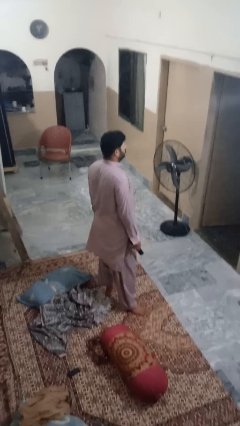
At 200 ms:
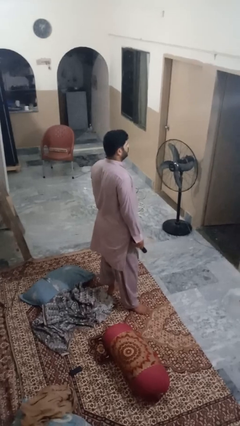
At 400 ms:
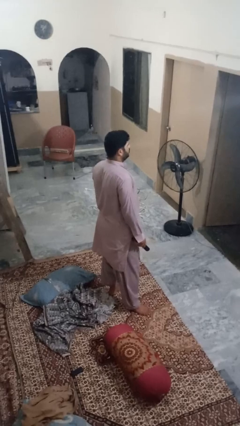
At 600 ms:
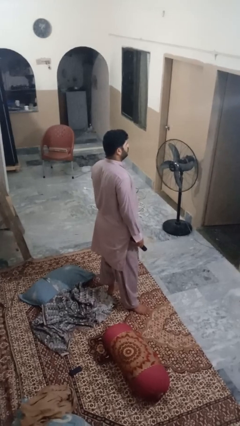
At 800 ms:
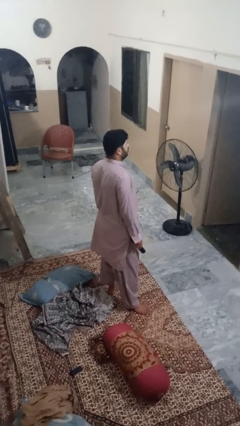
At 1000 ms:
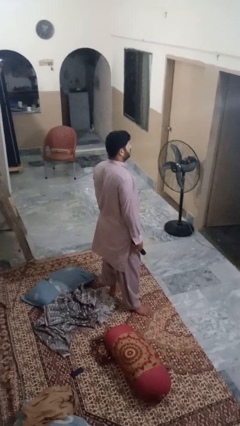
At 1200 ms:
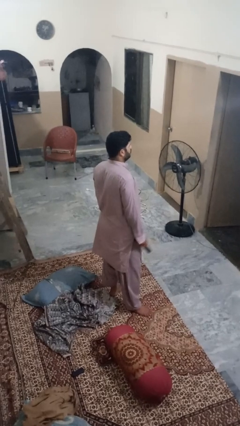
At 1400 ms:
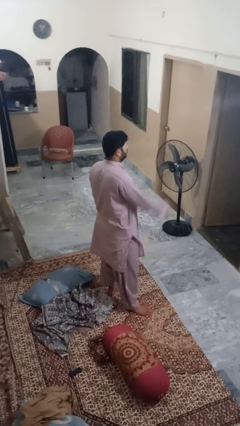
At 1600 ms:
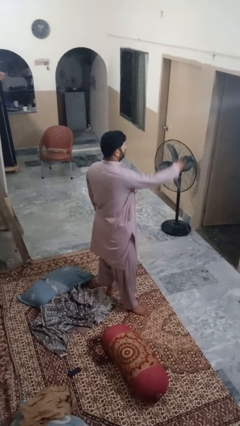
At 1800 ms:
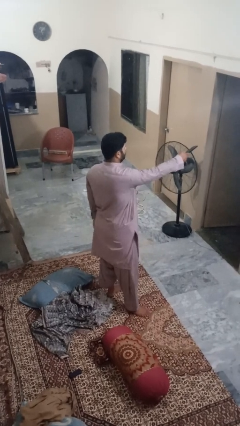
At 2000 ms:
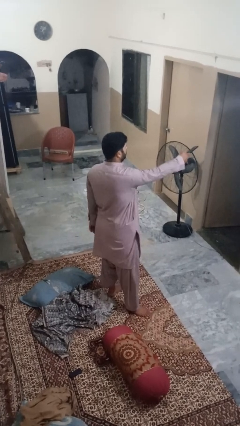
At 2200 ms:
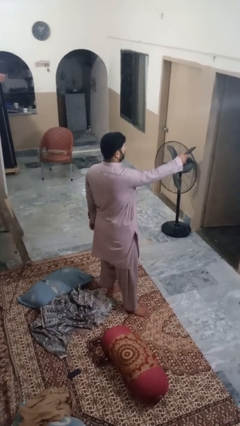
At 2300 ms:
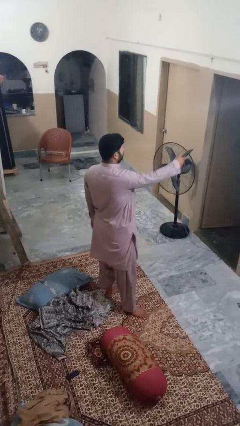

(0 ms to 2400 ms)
person uses television remote

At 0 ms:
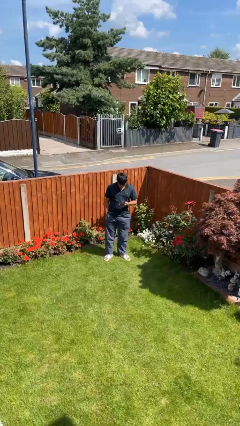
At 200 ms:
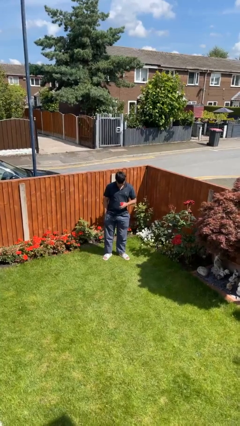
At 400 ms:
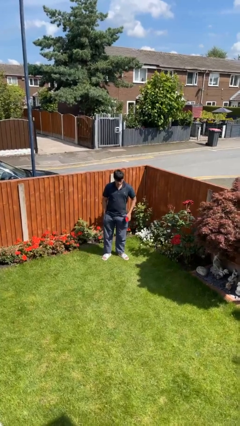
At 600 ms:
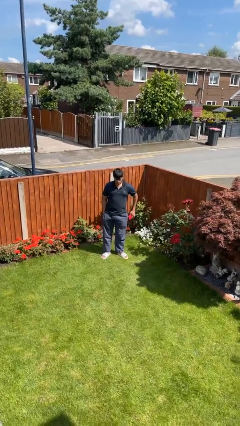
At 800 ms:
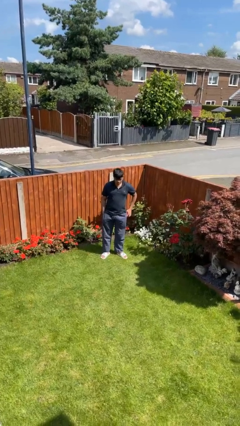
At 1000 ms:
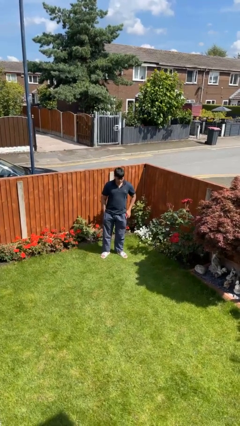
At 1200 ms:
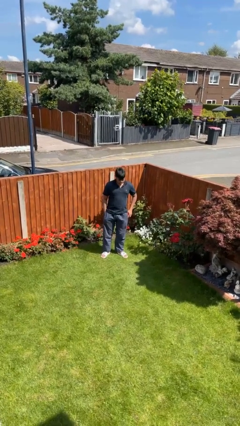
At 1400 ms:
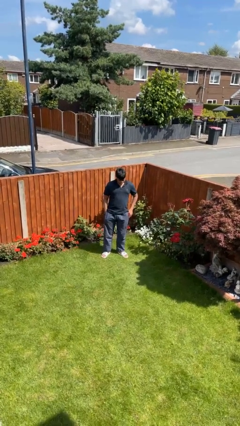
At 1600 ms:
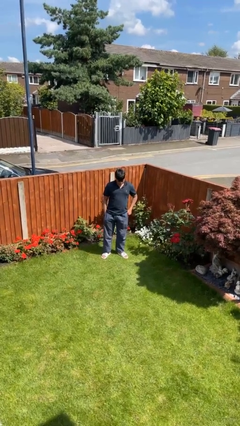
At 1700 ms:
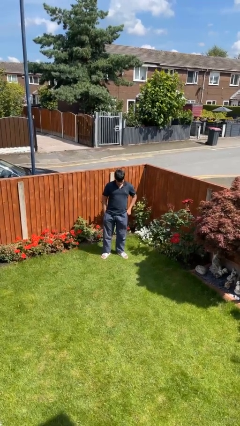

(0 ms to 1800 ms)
person puts phone into pocket

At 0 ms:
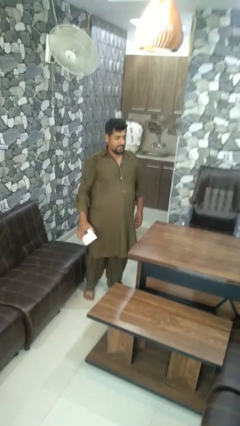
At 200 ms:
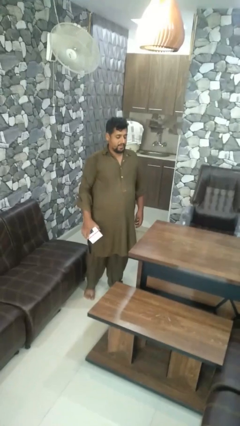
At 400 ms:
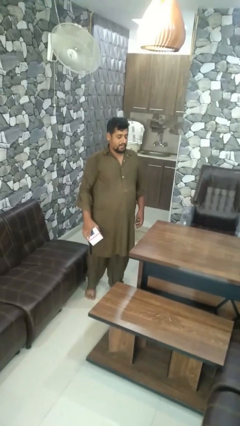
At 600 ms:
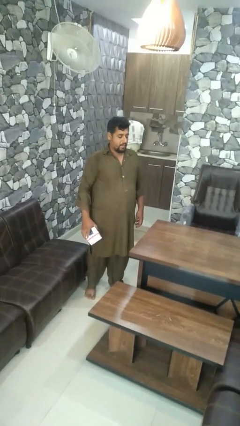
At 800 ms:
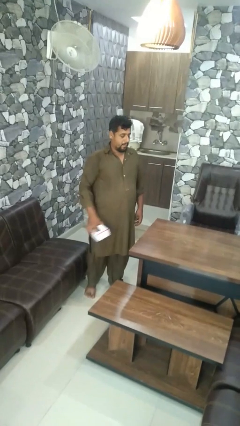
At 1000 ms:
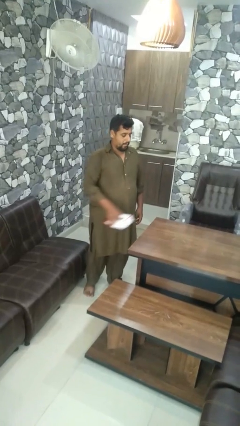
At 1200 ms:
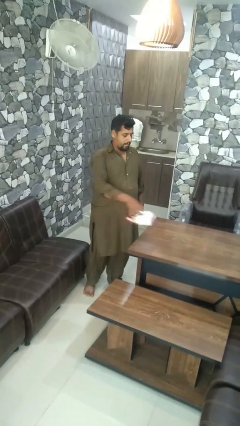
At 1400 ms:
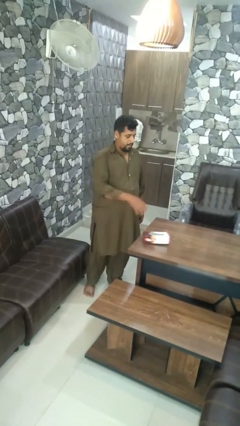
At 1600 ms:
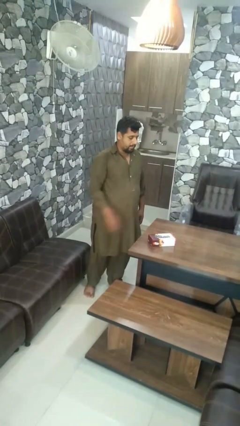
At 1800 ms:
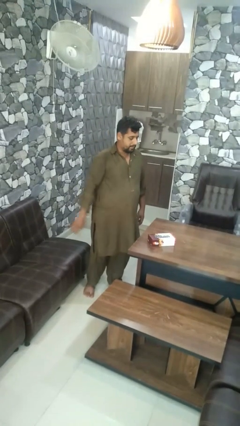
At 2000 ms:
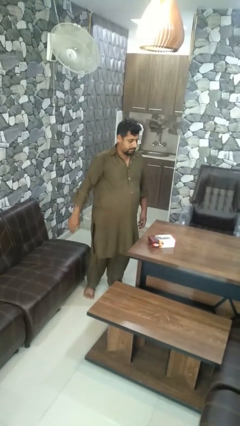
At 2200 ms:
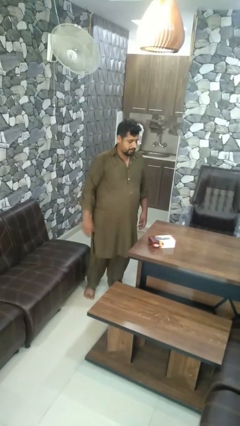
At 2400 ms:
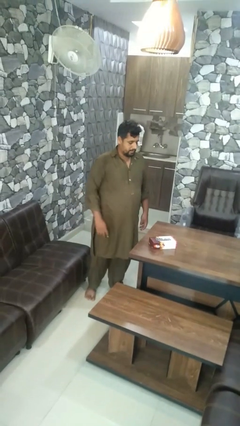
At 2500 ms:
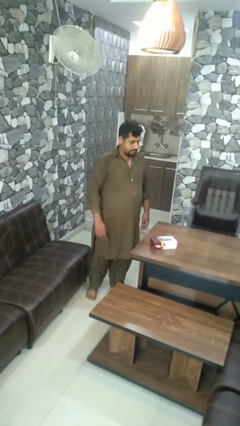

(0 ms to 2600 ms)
person throws object on table

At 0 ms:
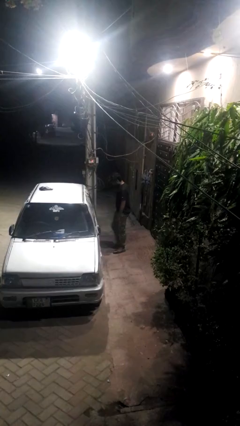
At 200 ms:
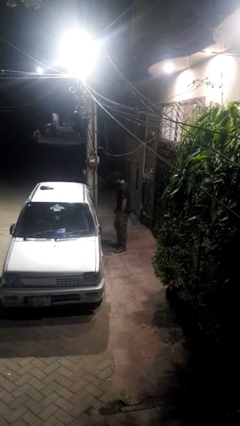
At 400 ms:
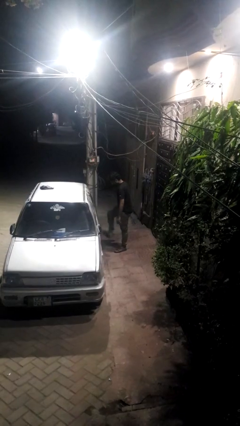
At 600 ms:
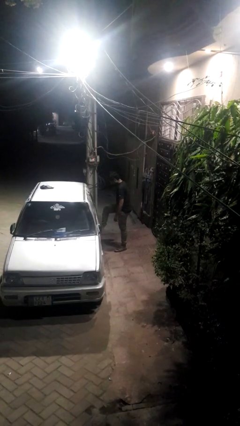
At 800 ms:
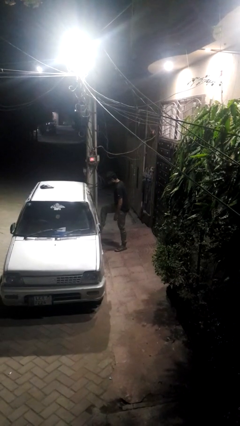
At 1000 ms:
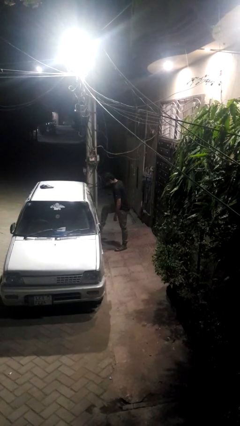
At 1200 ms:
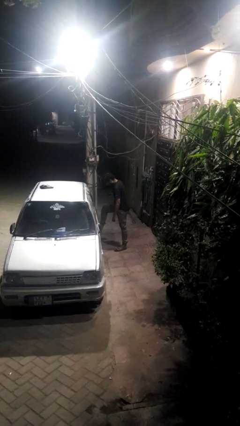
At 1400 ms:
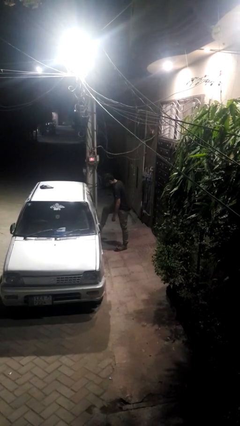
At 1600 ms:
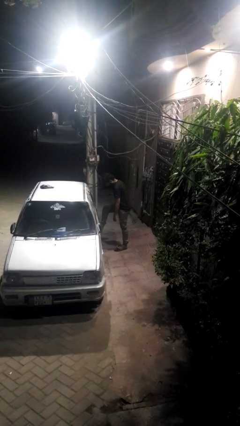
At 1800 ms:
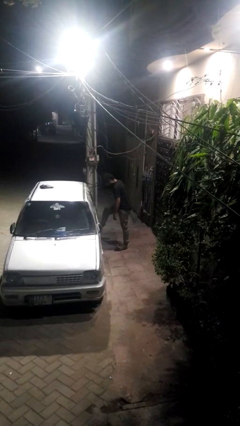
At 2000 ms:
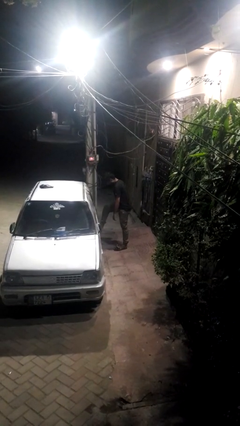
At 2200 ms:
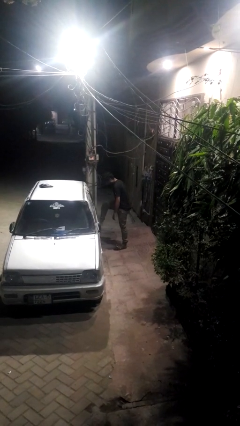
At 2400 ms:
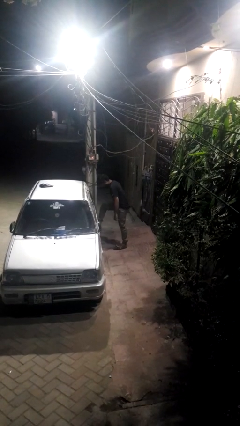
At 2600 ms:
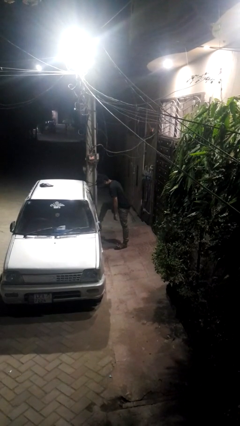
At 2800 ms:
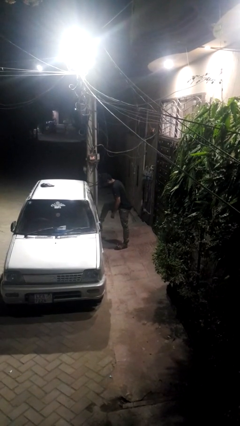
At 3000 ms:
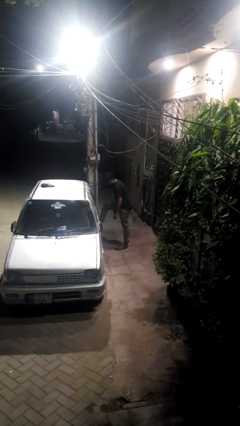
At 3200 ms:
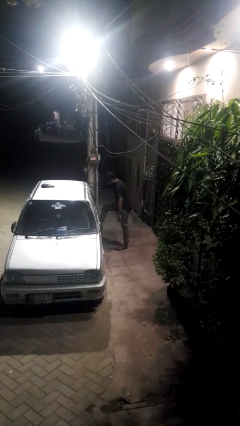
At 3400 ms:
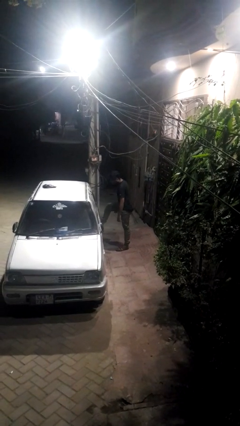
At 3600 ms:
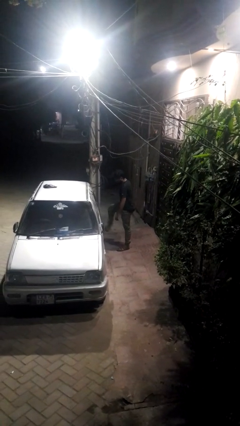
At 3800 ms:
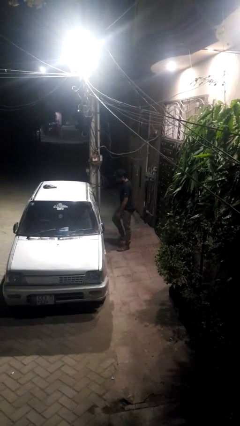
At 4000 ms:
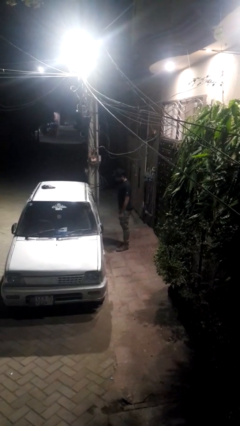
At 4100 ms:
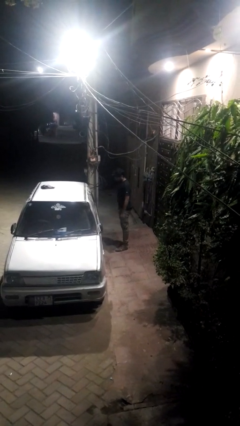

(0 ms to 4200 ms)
person kicks car tires

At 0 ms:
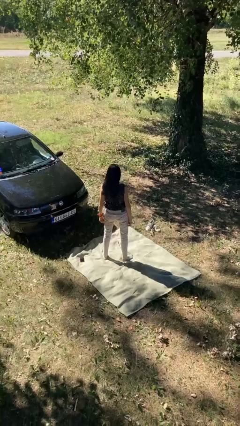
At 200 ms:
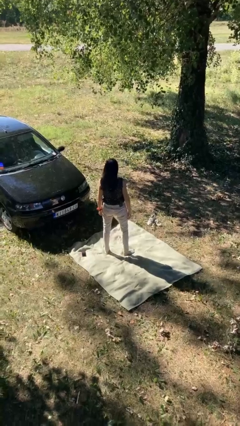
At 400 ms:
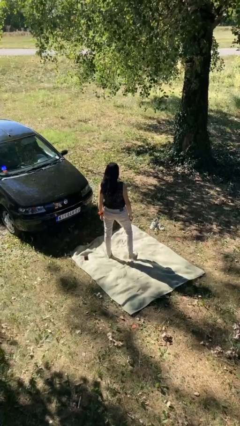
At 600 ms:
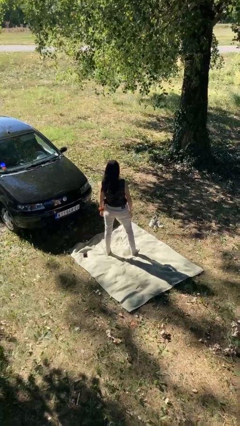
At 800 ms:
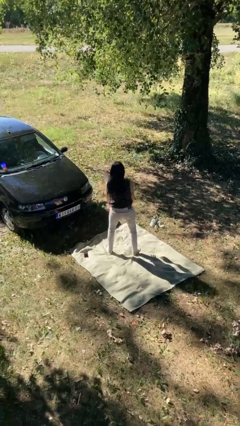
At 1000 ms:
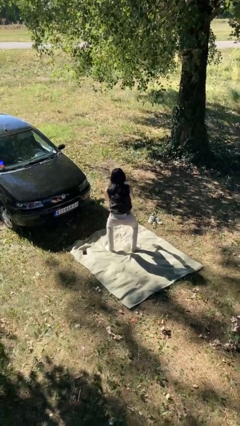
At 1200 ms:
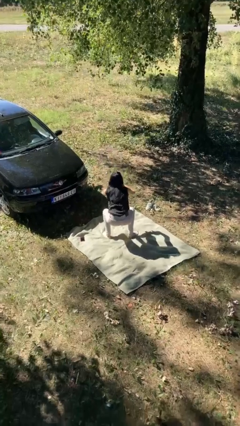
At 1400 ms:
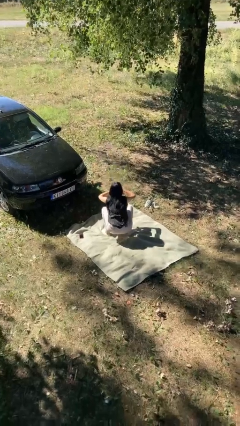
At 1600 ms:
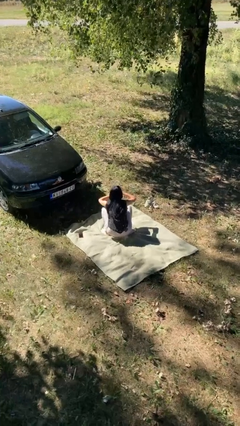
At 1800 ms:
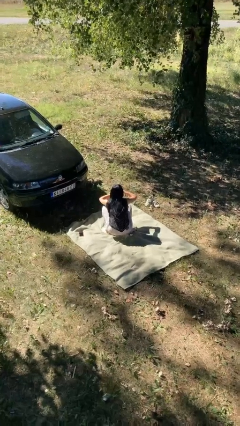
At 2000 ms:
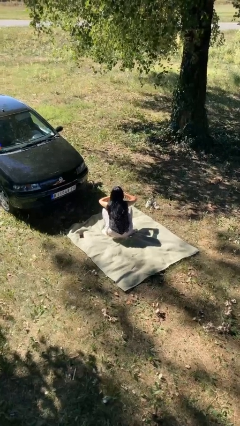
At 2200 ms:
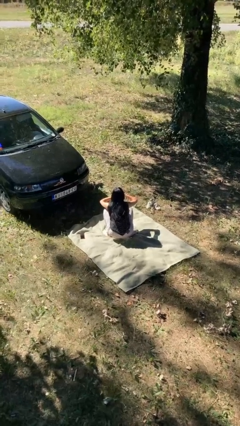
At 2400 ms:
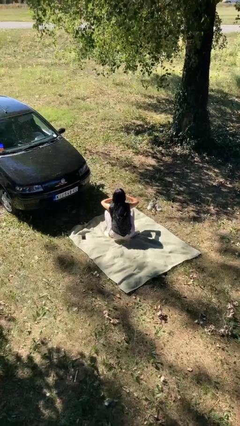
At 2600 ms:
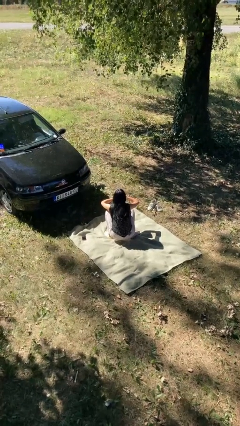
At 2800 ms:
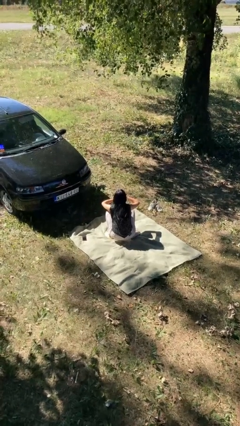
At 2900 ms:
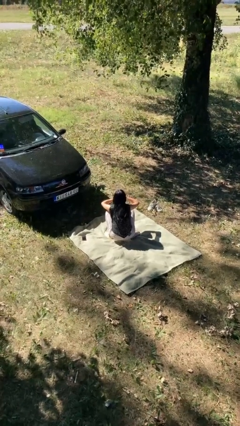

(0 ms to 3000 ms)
person squats
